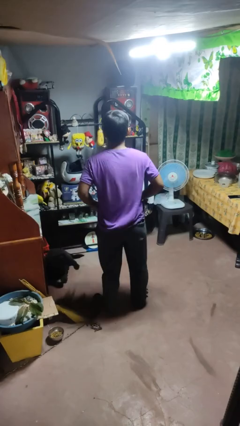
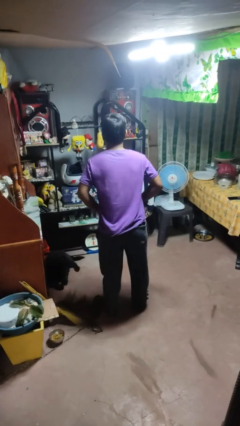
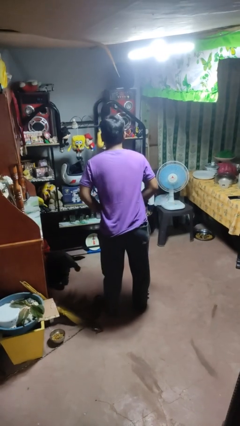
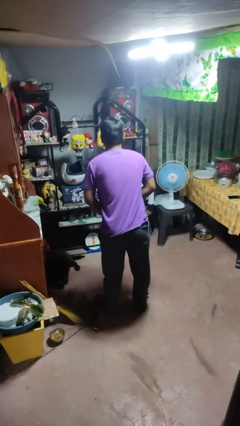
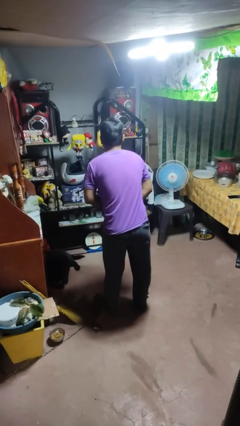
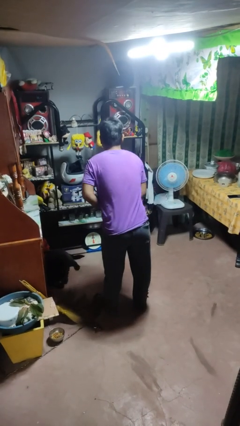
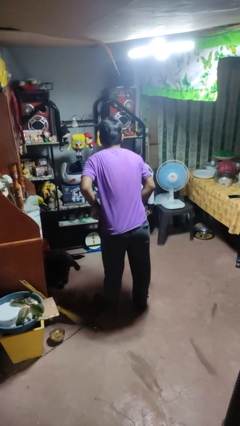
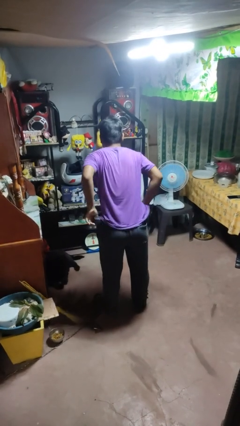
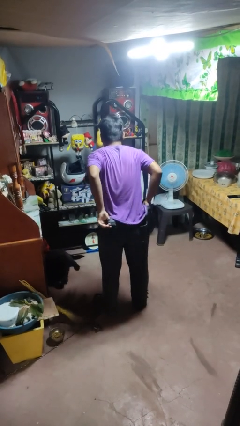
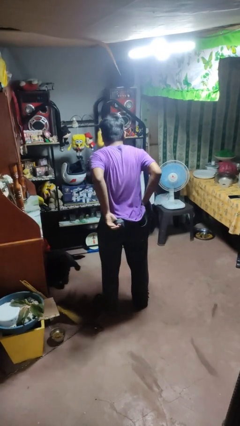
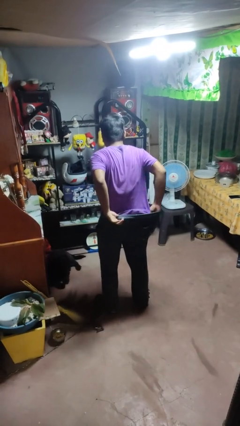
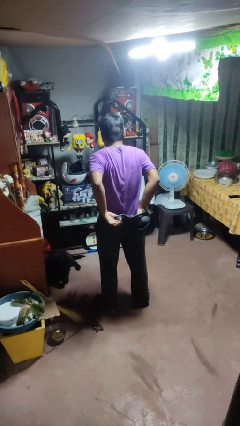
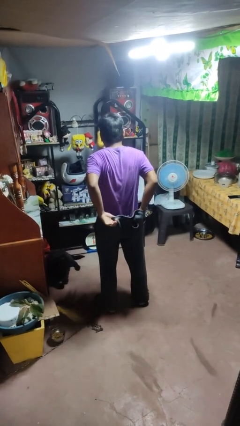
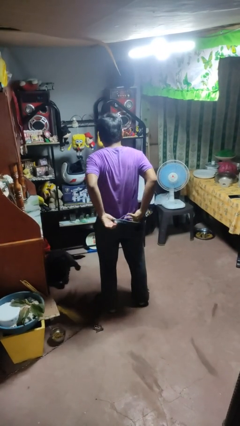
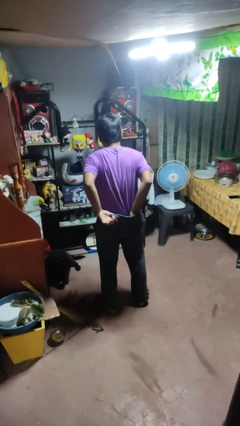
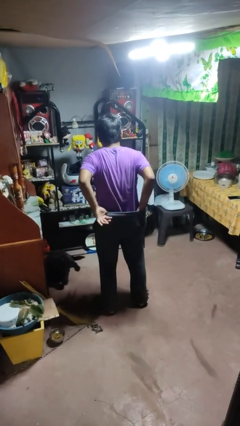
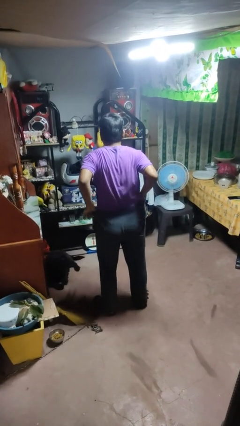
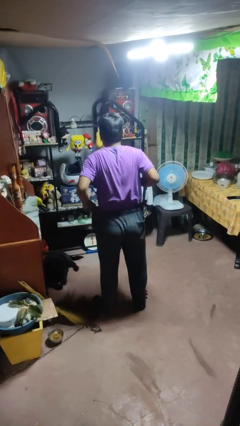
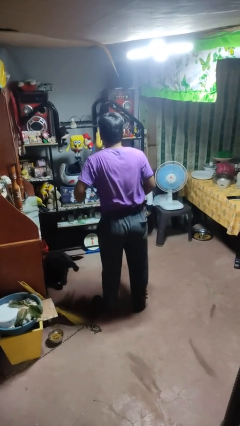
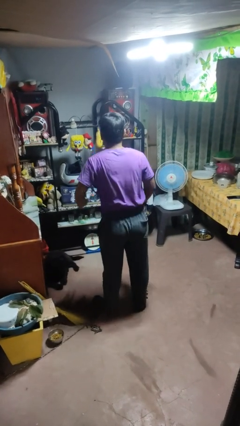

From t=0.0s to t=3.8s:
person tucks in shirt

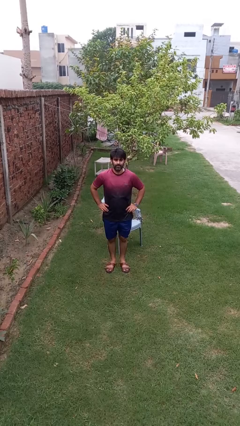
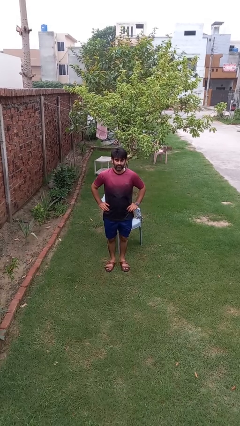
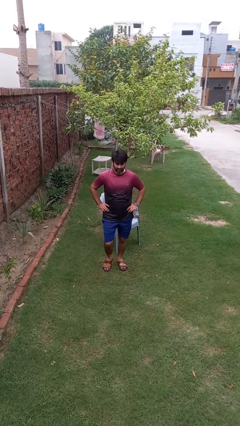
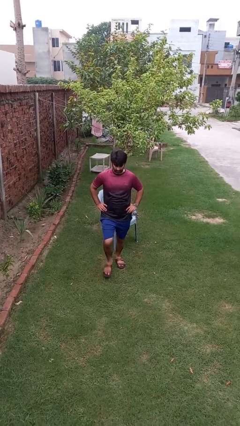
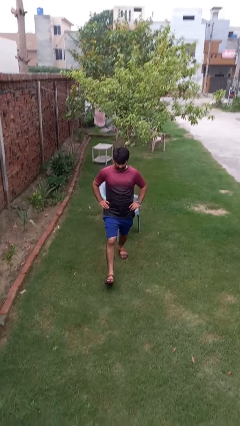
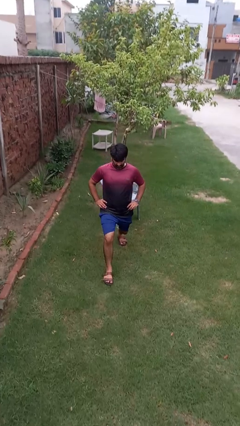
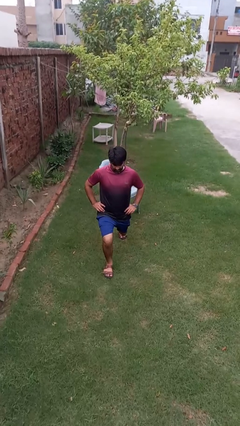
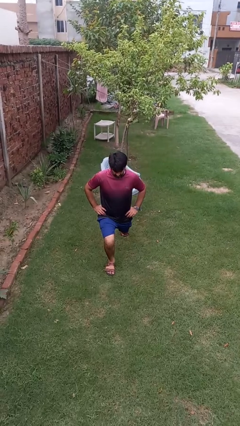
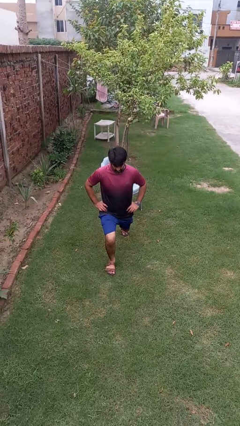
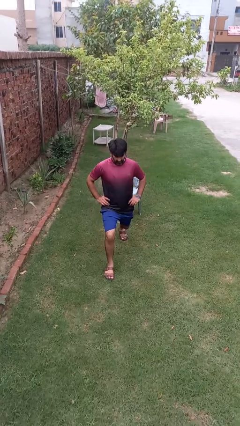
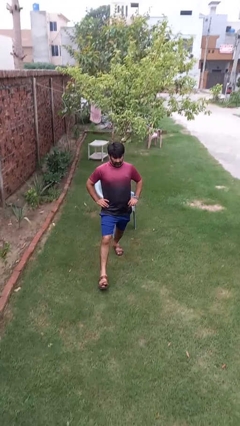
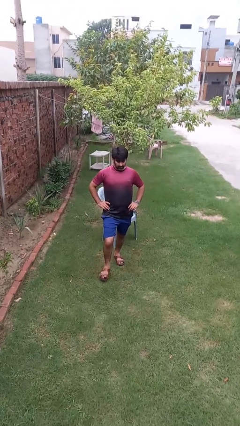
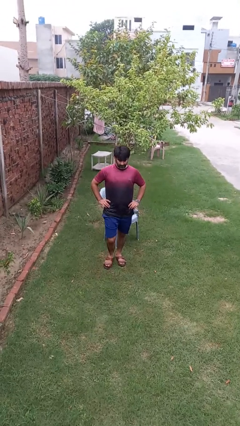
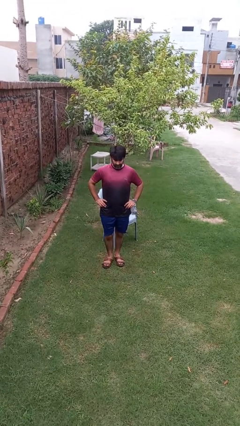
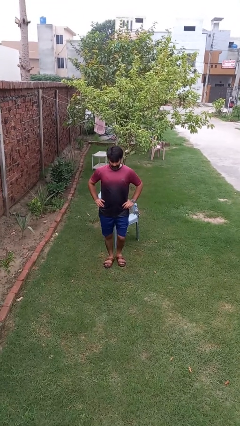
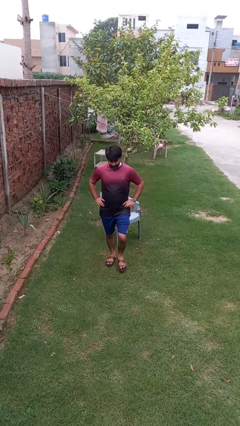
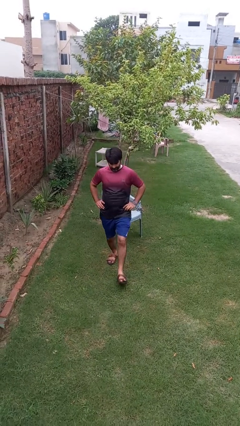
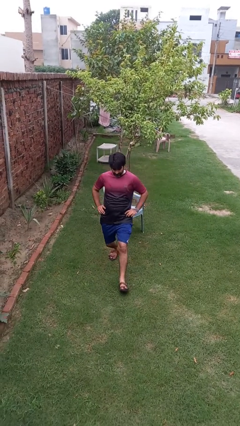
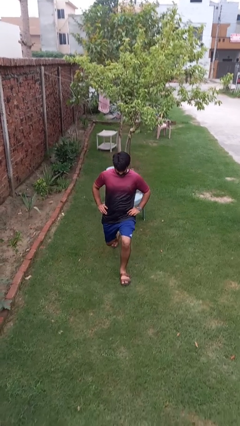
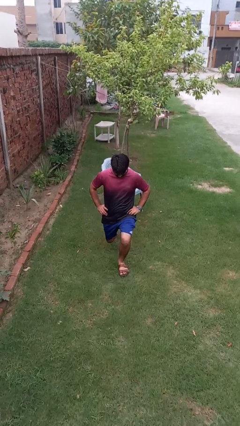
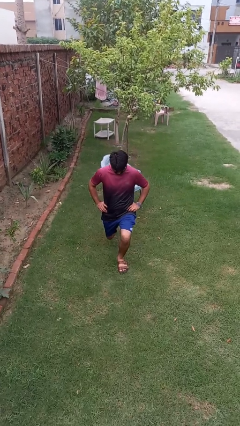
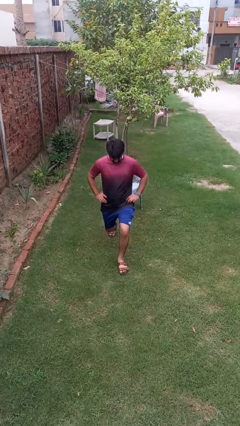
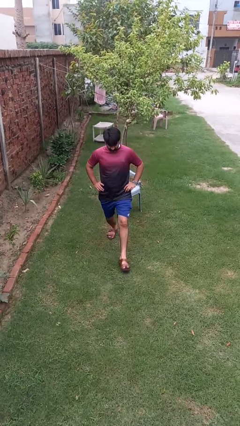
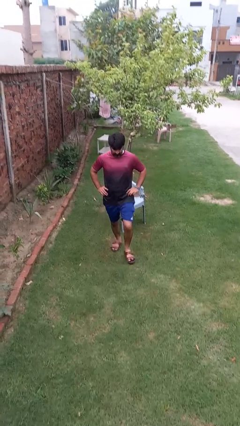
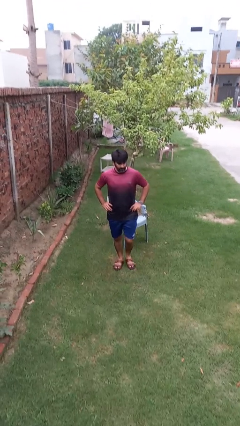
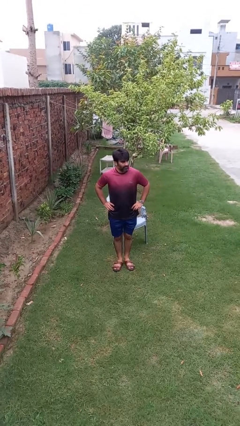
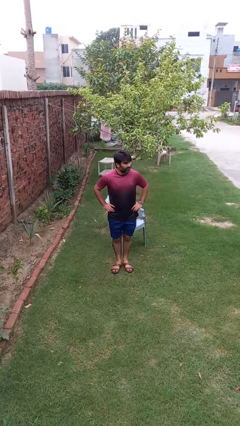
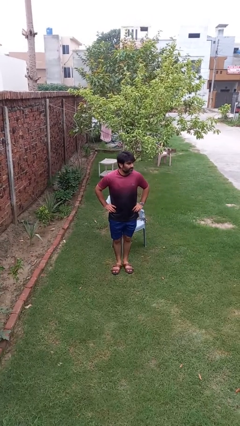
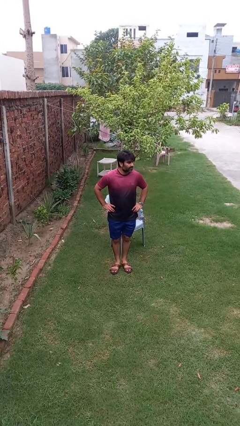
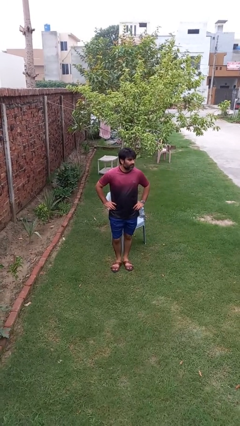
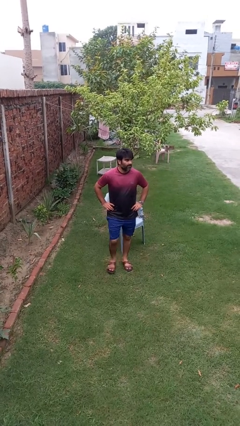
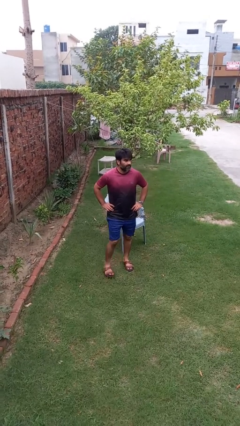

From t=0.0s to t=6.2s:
person exercises with lunges

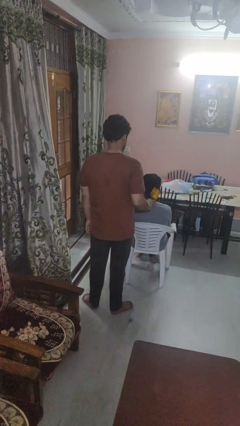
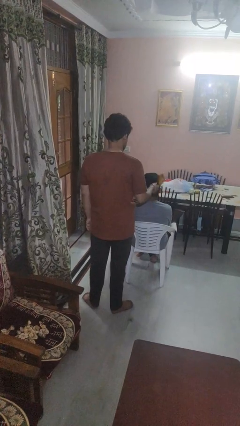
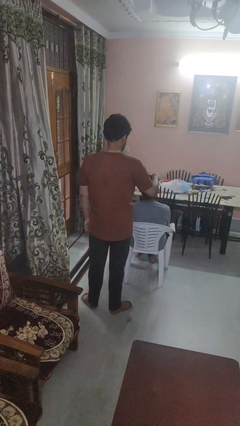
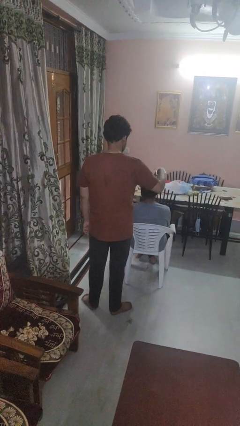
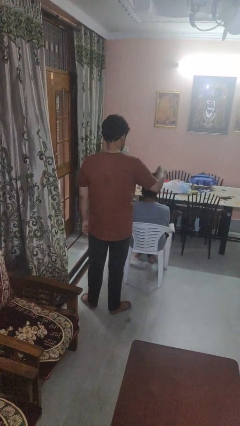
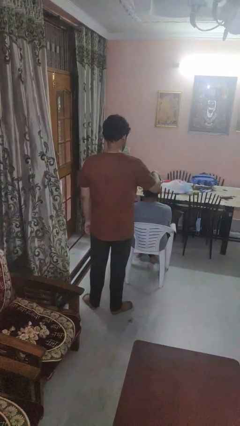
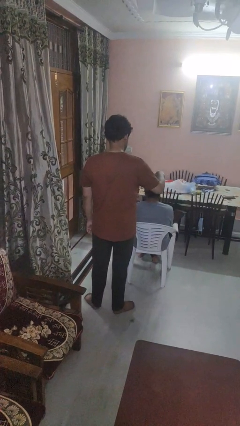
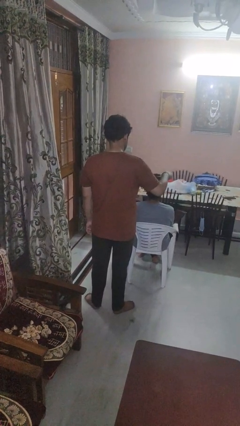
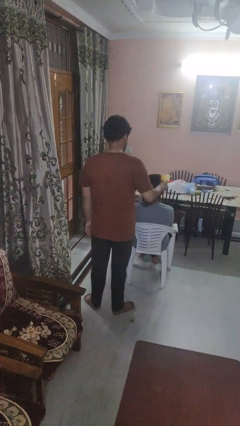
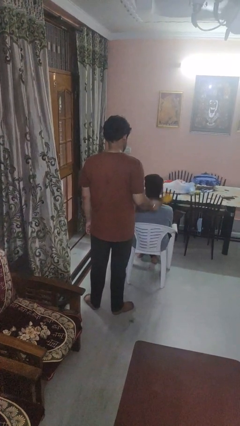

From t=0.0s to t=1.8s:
person brushes hair of person

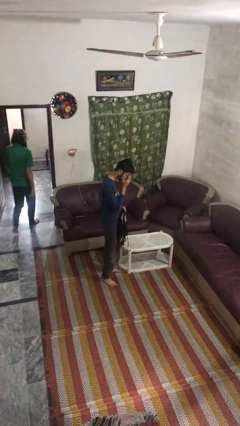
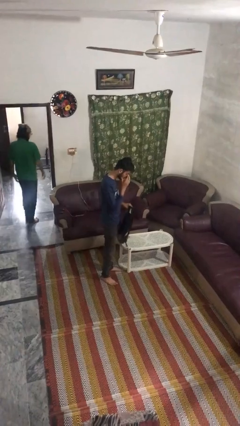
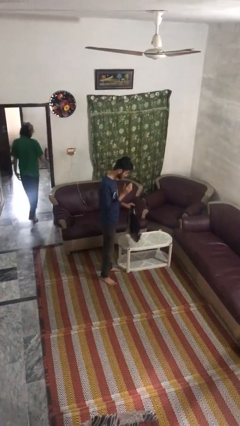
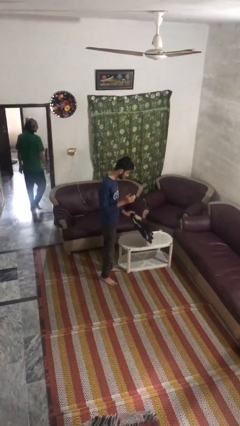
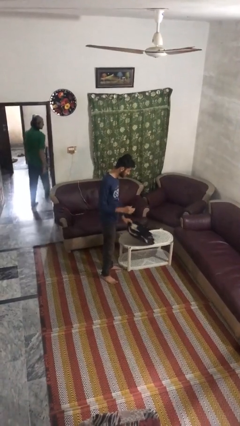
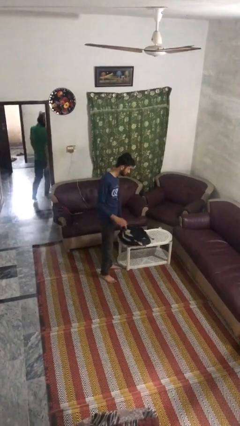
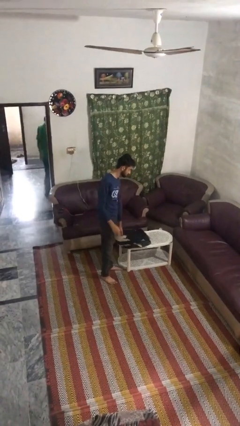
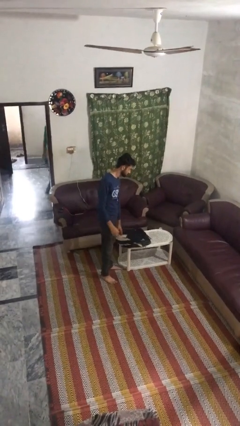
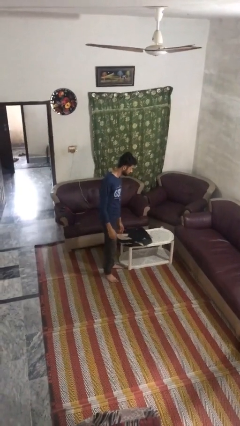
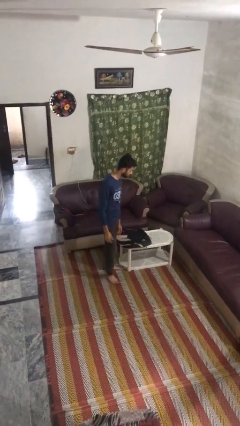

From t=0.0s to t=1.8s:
person puts down object on table

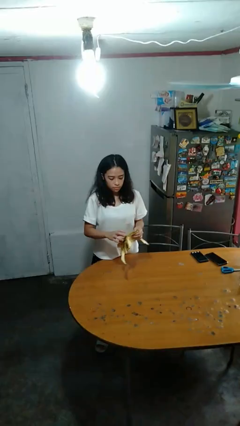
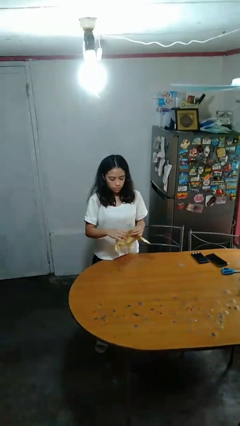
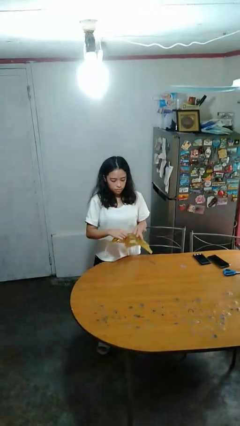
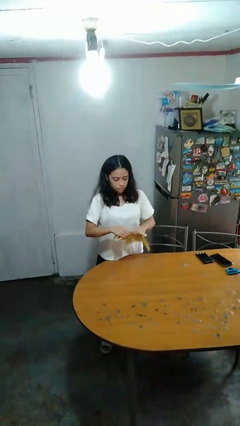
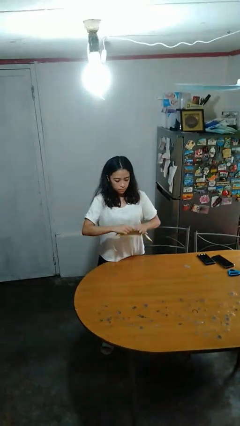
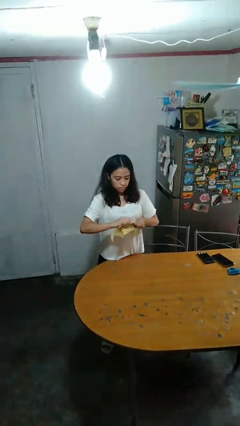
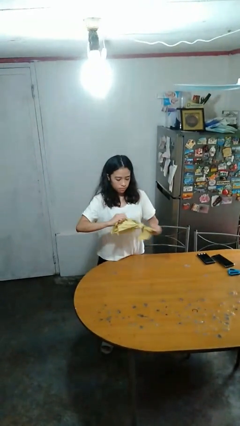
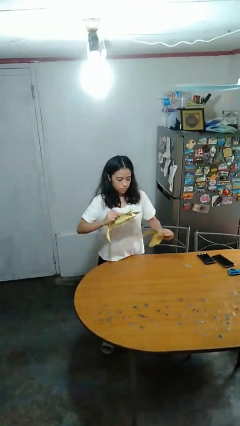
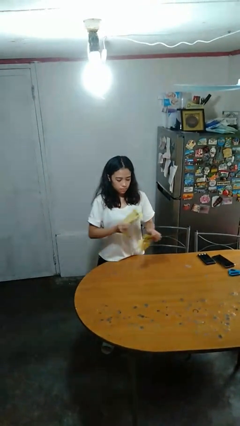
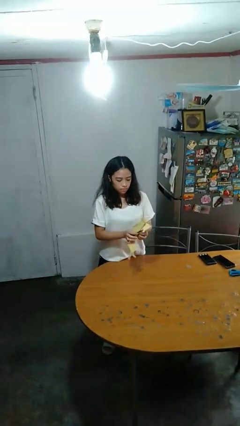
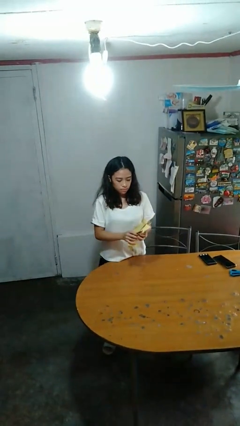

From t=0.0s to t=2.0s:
person tears paper

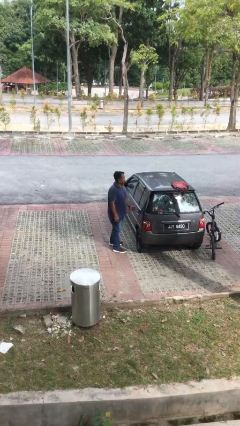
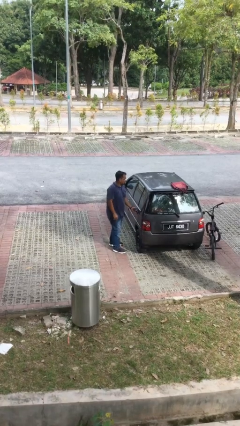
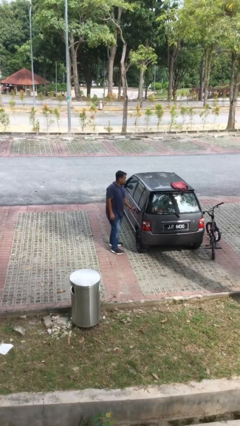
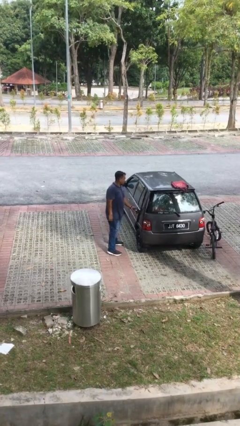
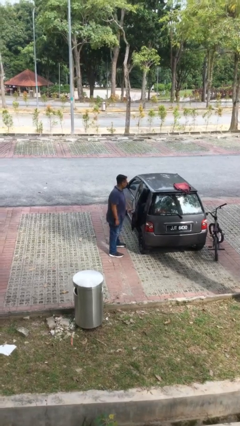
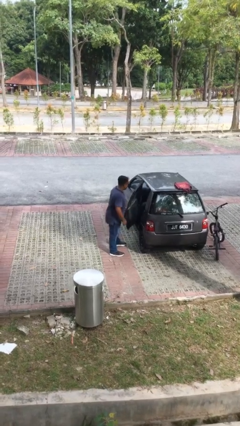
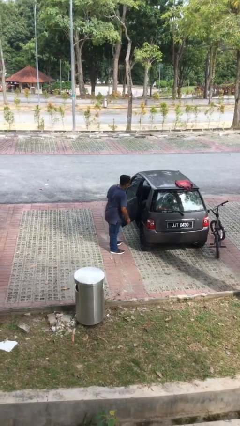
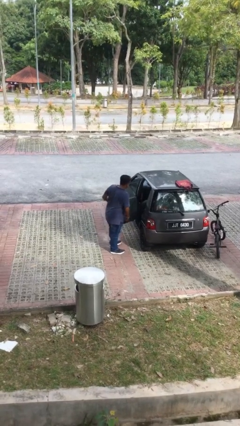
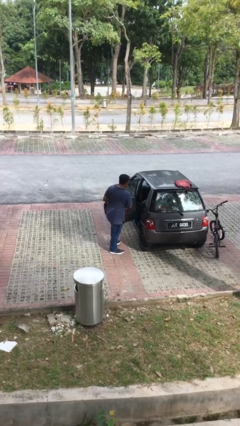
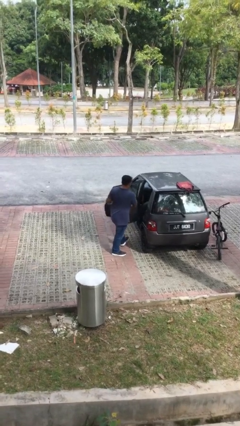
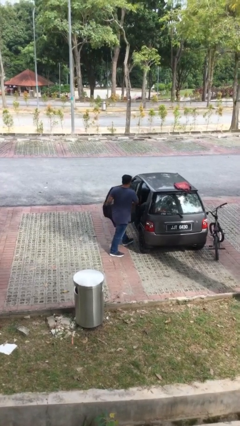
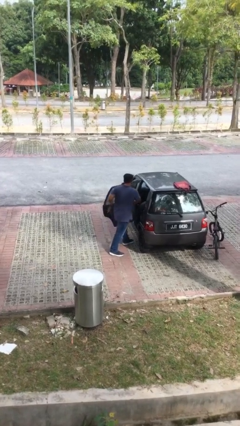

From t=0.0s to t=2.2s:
person opens car door
